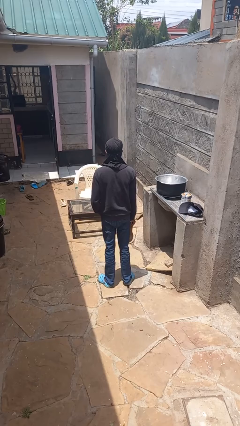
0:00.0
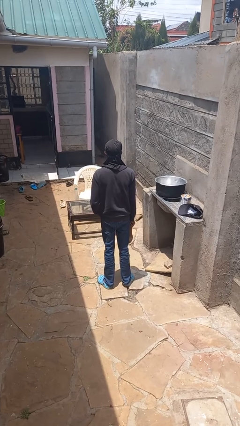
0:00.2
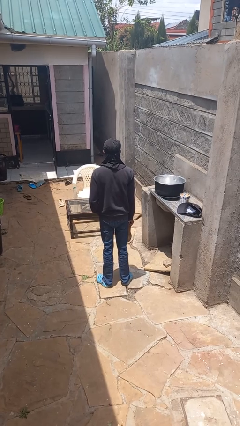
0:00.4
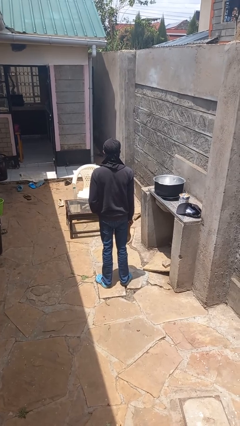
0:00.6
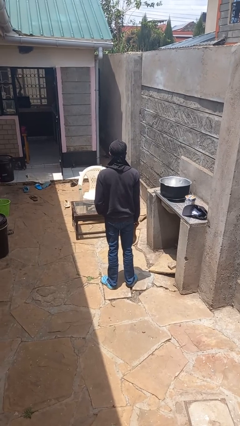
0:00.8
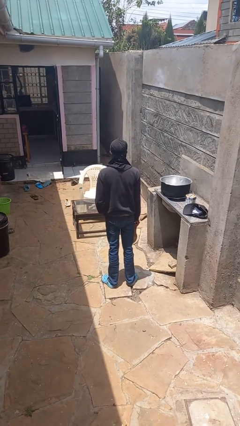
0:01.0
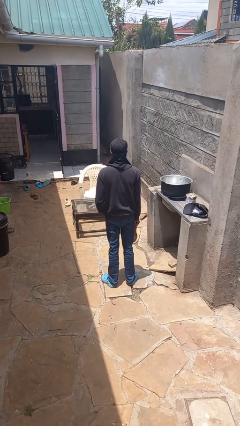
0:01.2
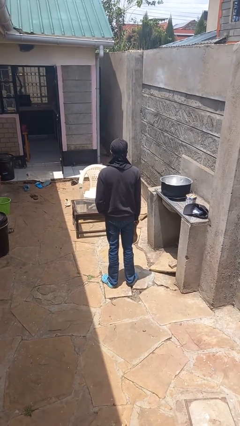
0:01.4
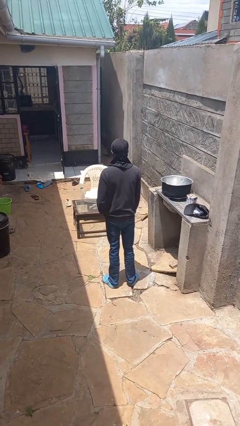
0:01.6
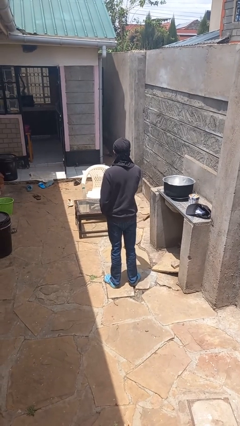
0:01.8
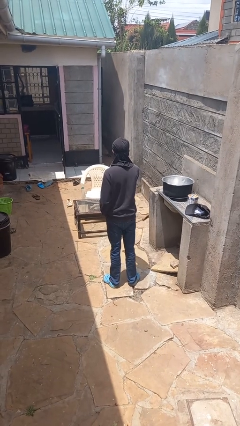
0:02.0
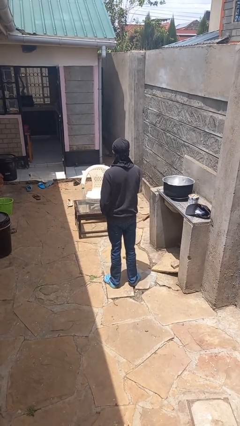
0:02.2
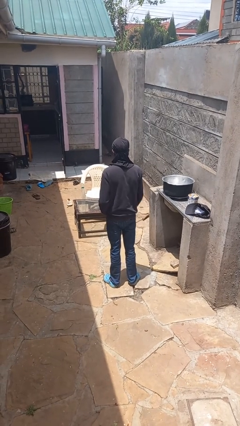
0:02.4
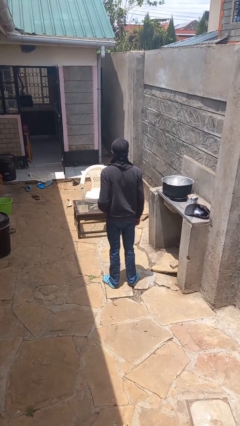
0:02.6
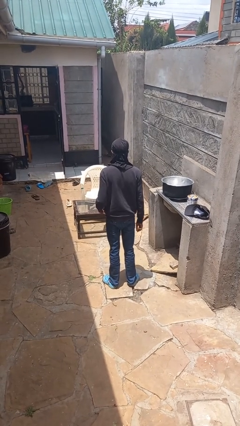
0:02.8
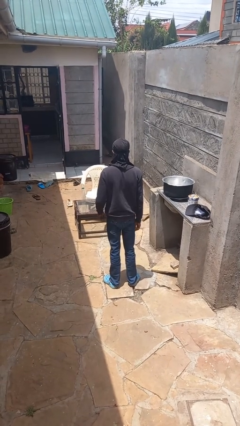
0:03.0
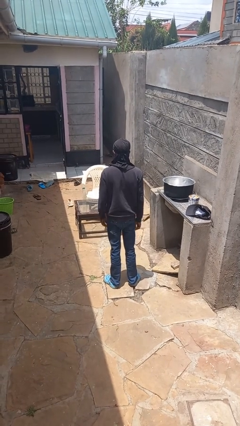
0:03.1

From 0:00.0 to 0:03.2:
person throws object on table

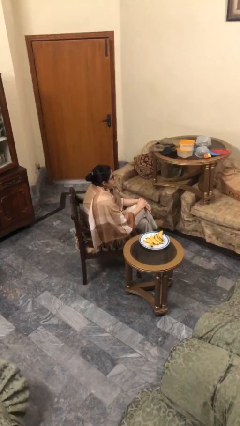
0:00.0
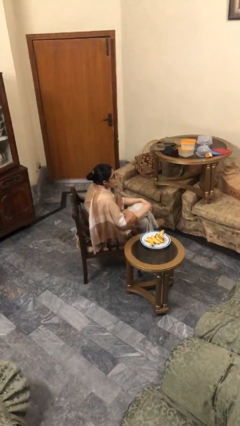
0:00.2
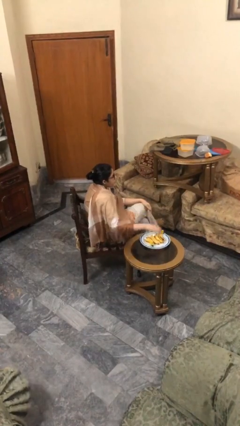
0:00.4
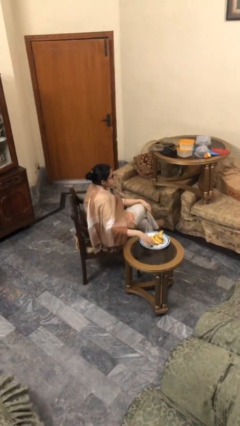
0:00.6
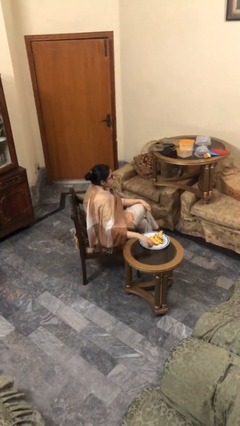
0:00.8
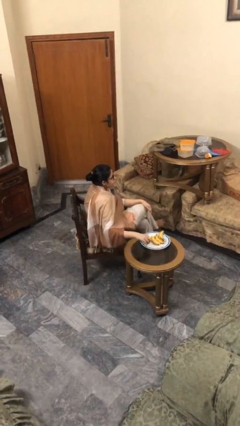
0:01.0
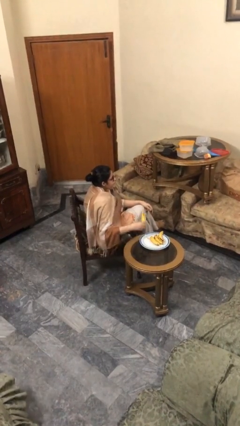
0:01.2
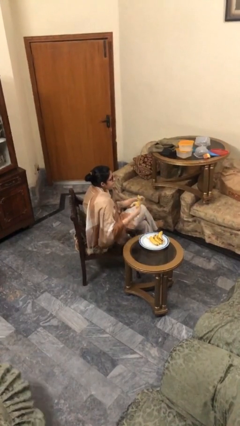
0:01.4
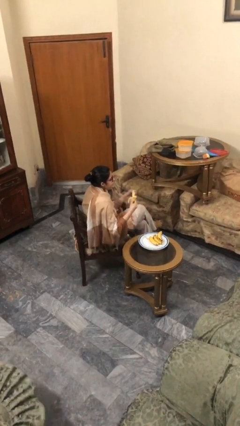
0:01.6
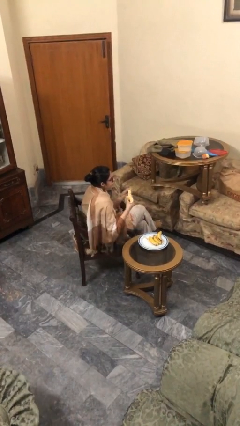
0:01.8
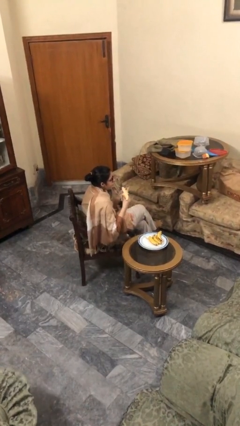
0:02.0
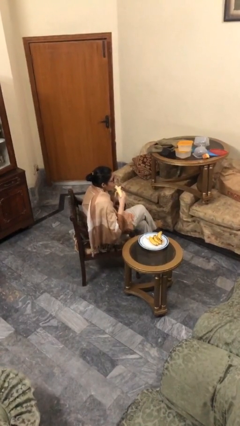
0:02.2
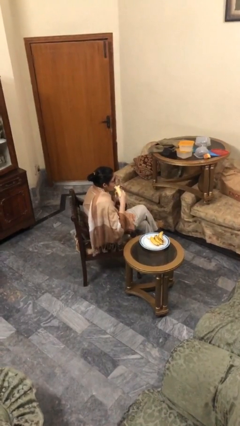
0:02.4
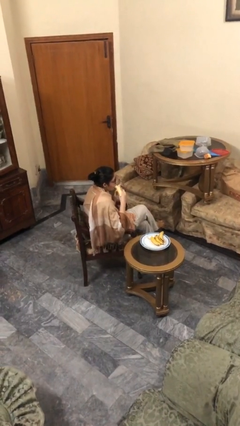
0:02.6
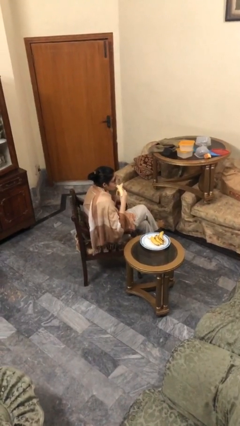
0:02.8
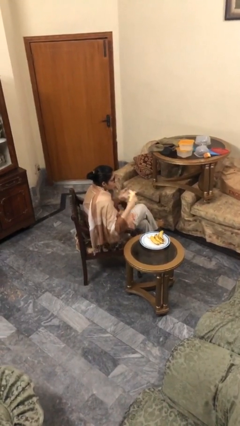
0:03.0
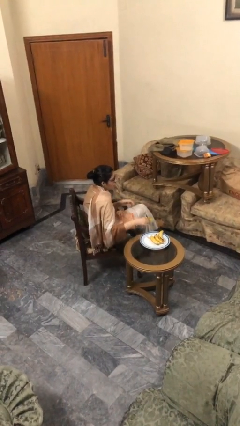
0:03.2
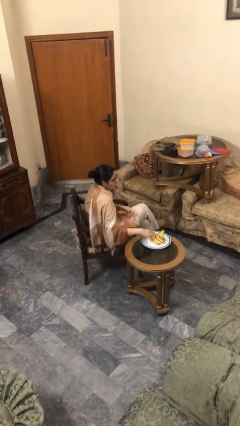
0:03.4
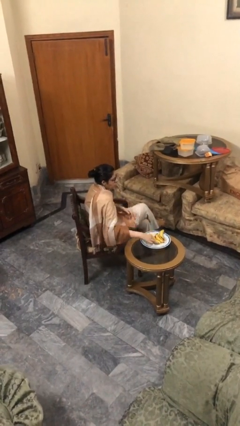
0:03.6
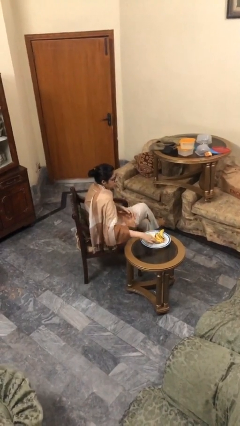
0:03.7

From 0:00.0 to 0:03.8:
person eats banana

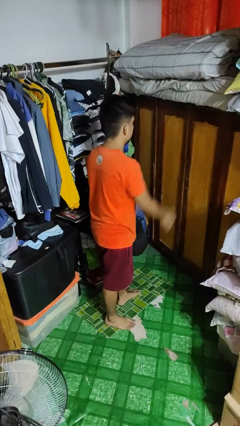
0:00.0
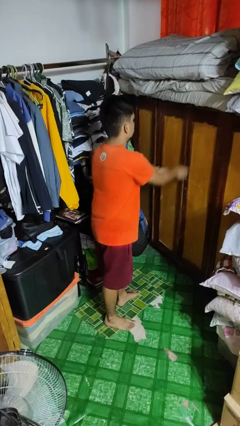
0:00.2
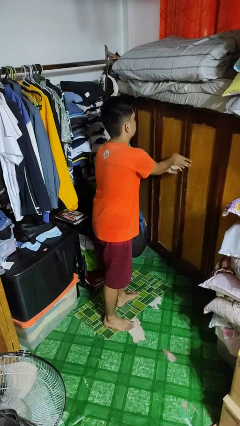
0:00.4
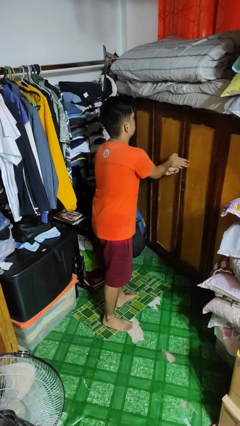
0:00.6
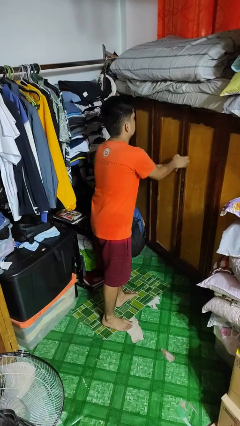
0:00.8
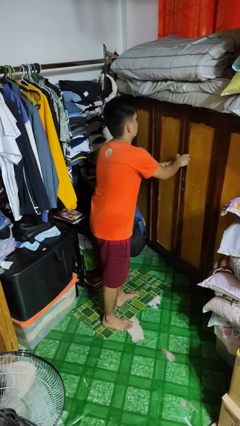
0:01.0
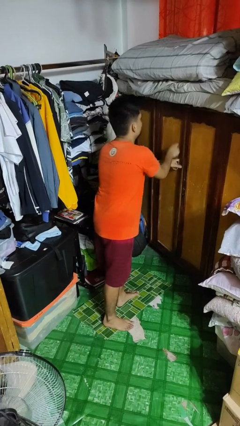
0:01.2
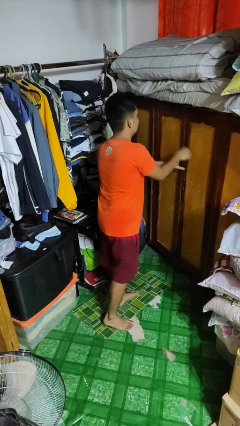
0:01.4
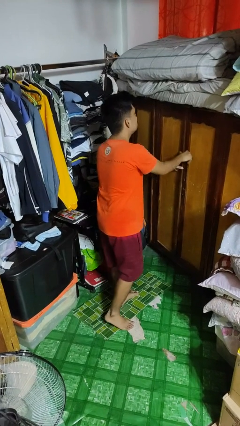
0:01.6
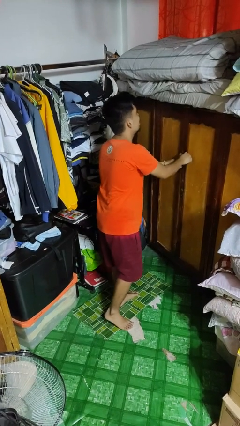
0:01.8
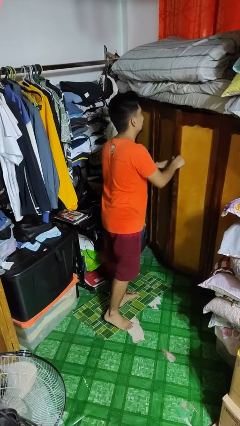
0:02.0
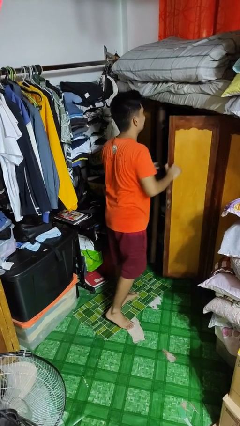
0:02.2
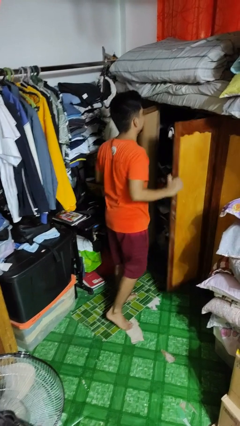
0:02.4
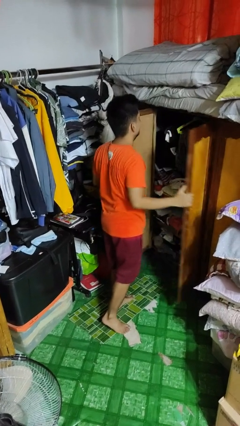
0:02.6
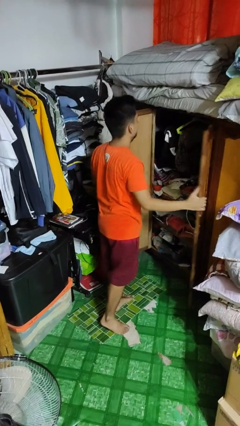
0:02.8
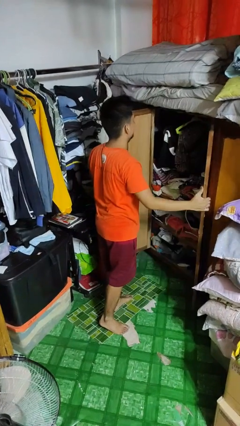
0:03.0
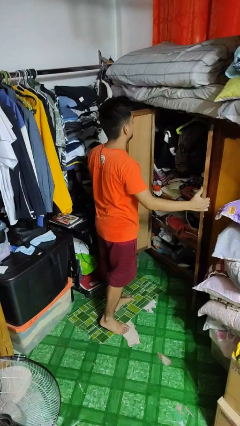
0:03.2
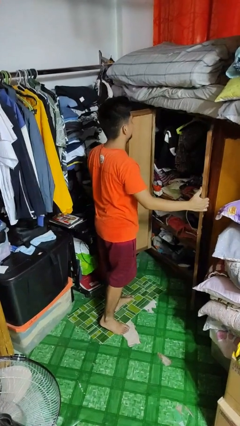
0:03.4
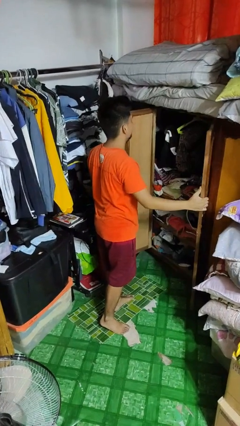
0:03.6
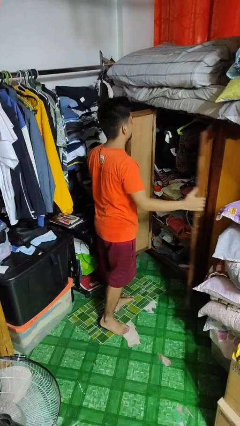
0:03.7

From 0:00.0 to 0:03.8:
person opens closet door

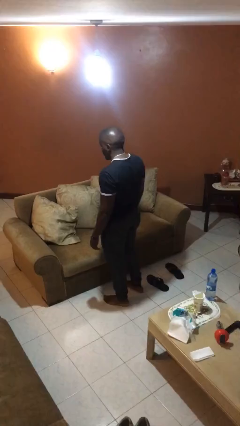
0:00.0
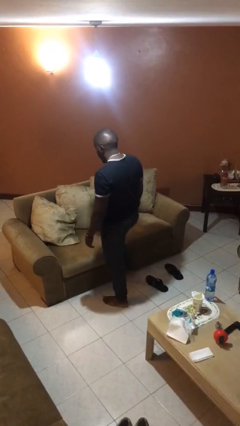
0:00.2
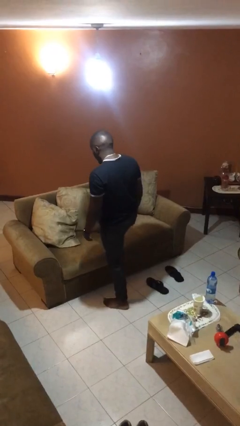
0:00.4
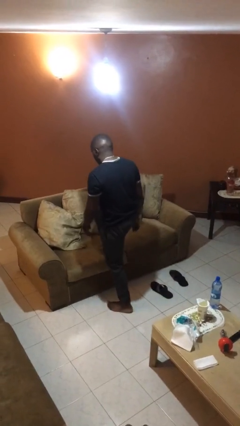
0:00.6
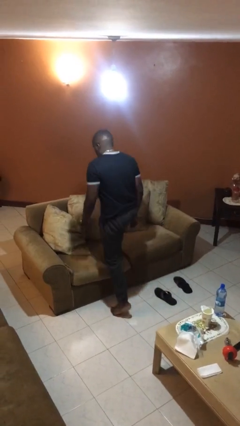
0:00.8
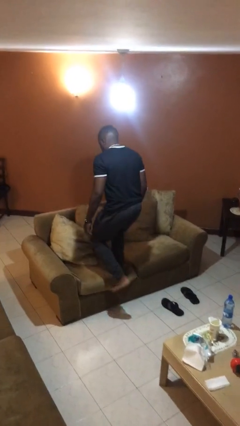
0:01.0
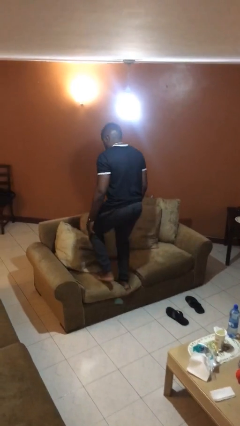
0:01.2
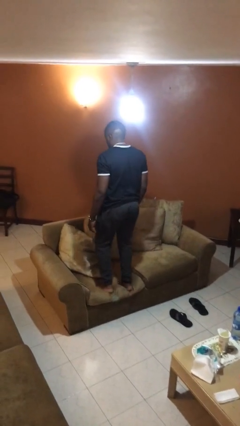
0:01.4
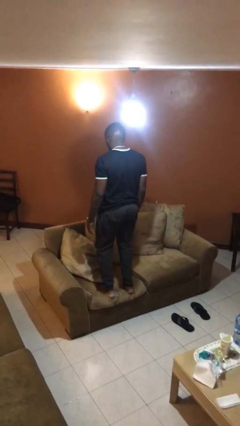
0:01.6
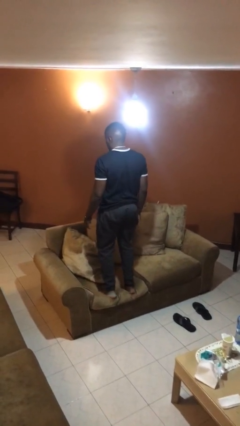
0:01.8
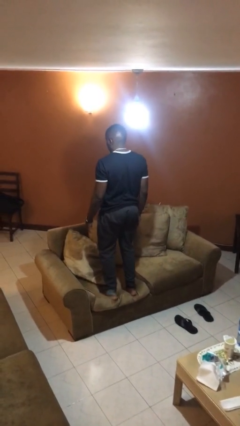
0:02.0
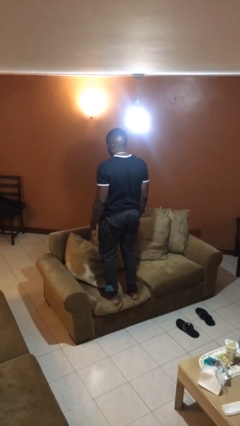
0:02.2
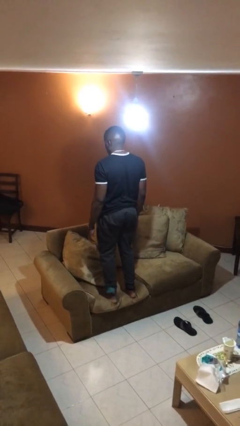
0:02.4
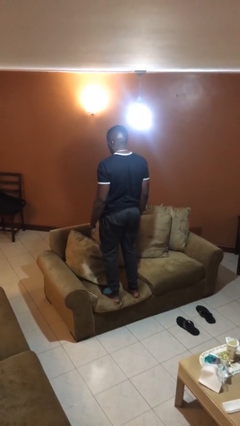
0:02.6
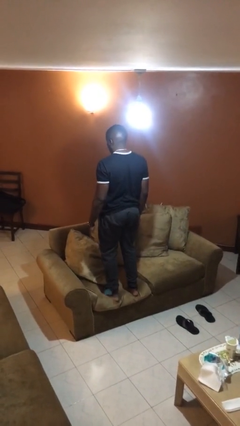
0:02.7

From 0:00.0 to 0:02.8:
person climbs on chair

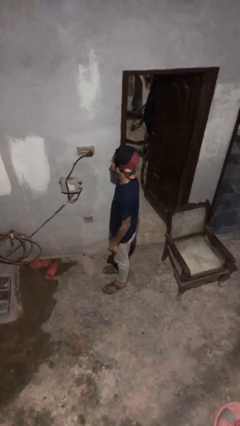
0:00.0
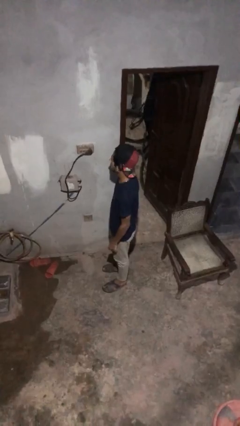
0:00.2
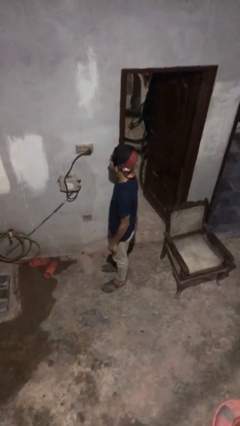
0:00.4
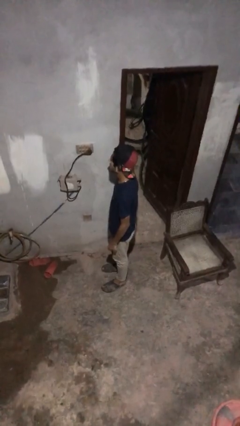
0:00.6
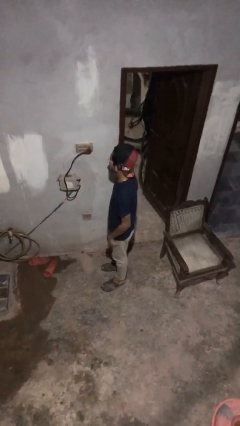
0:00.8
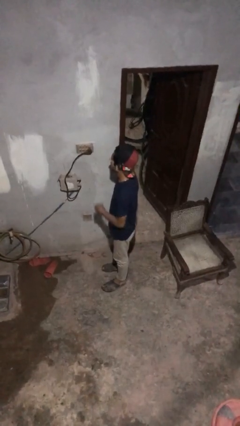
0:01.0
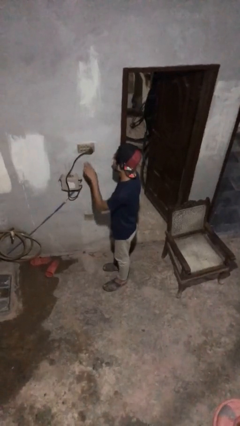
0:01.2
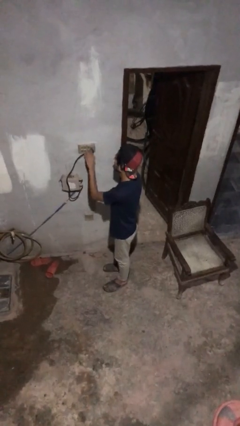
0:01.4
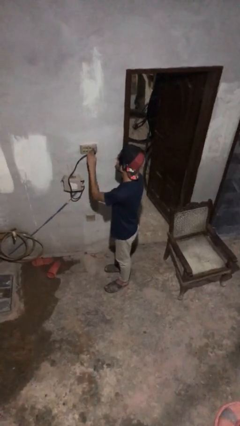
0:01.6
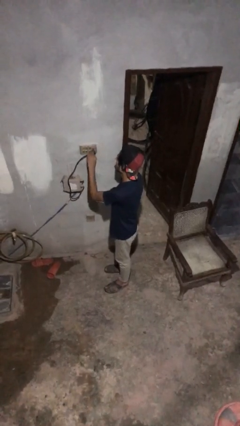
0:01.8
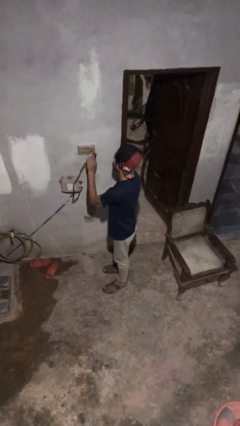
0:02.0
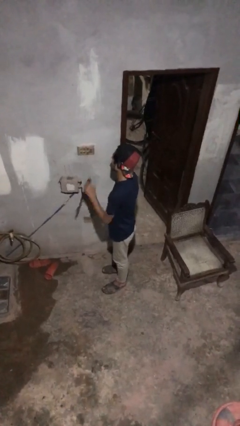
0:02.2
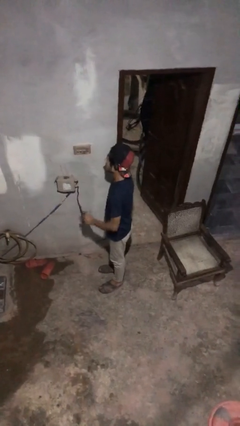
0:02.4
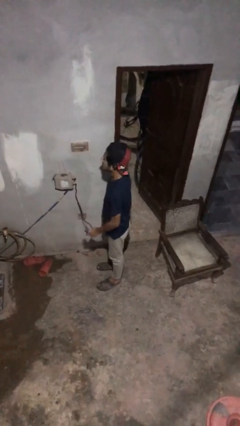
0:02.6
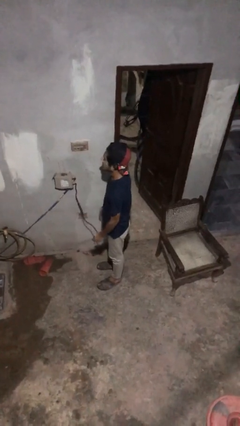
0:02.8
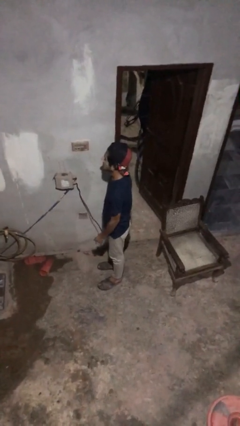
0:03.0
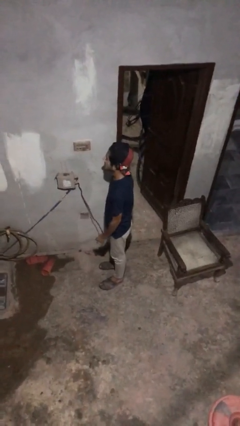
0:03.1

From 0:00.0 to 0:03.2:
person unplugs from electrical socket

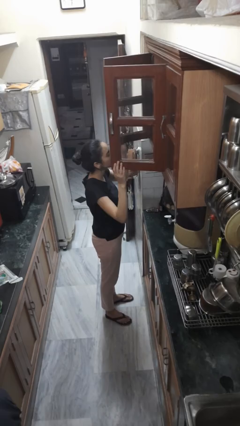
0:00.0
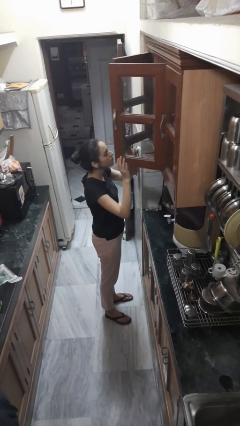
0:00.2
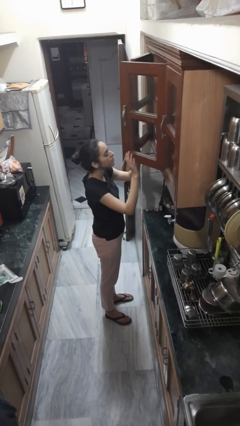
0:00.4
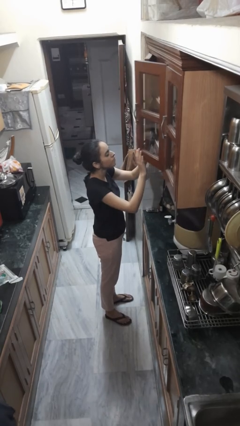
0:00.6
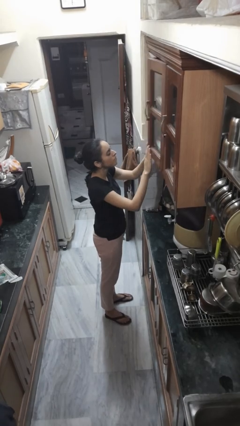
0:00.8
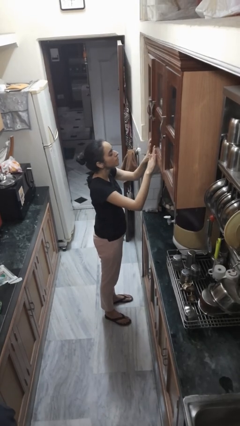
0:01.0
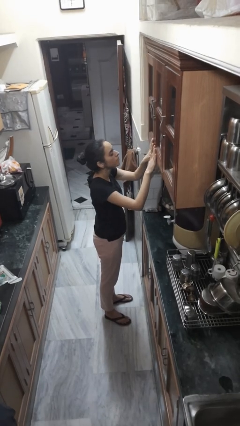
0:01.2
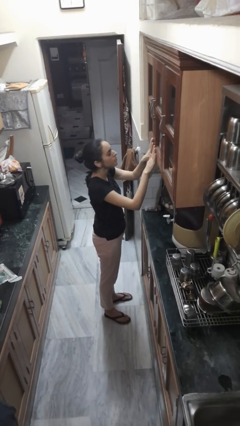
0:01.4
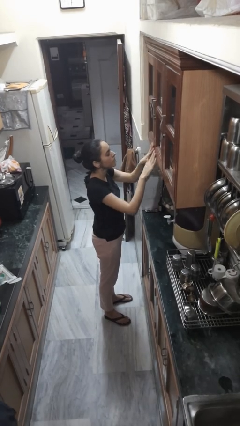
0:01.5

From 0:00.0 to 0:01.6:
person closes cabinet
